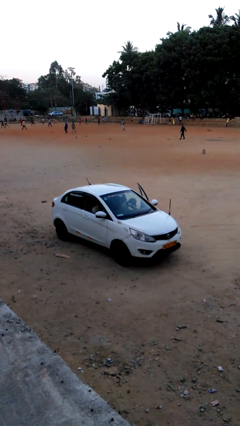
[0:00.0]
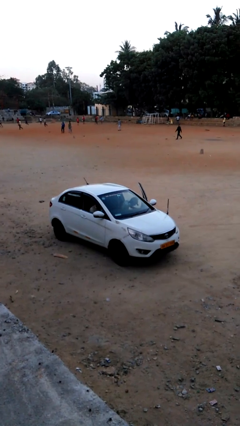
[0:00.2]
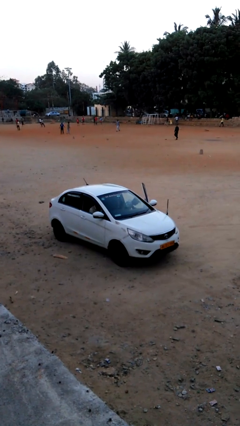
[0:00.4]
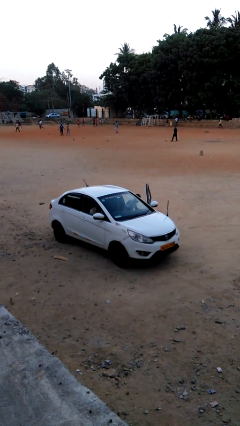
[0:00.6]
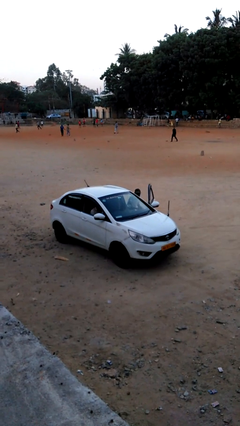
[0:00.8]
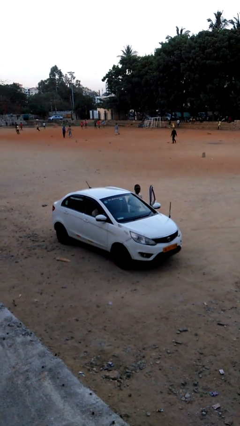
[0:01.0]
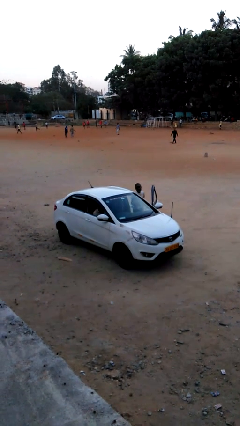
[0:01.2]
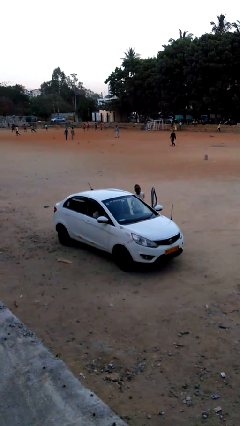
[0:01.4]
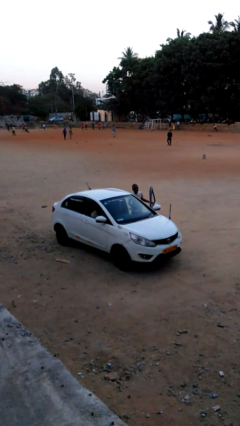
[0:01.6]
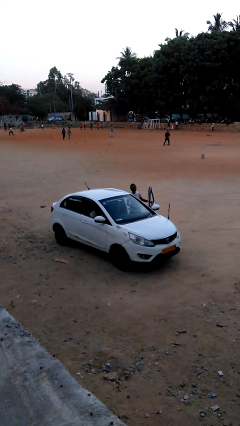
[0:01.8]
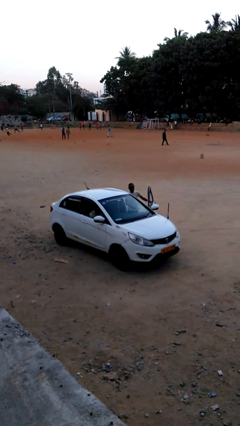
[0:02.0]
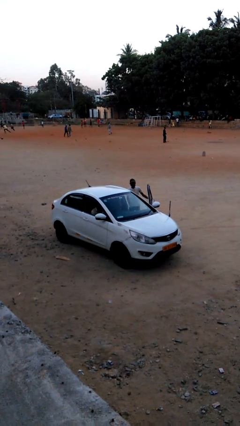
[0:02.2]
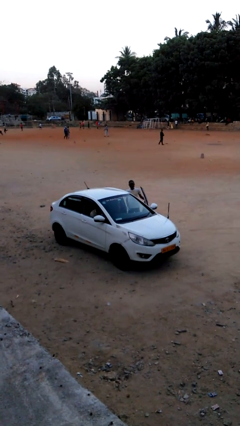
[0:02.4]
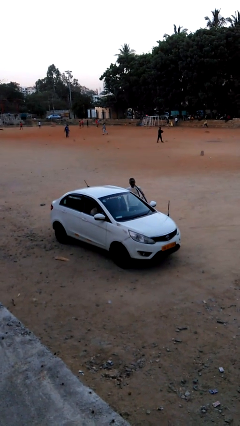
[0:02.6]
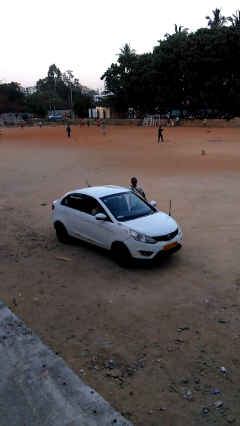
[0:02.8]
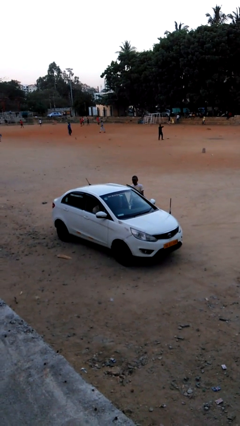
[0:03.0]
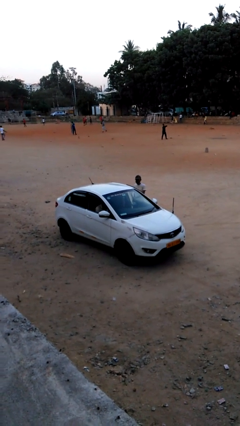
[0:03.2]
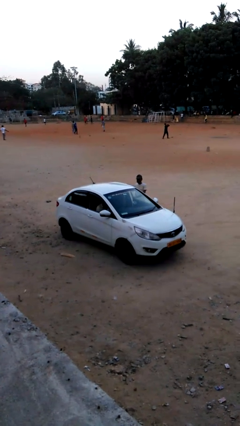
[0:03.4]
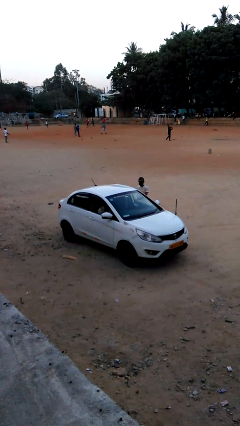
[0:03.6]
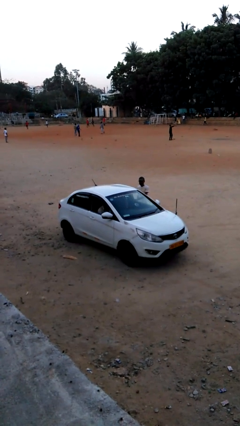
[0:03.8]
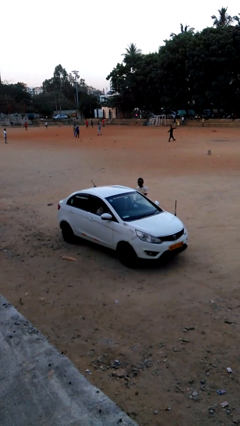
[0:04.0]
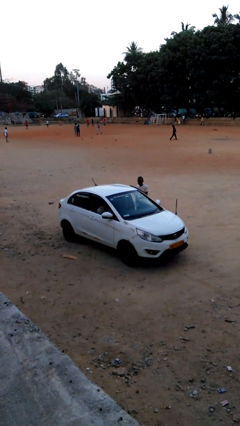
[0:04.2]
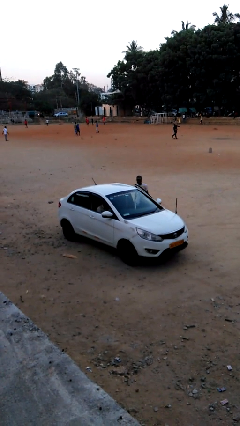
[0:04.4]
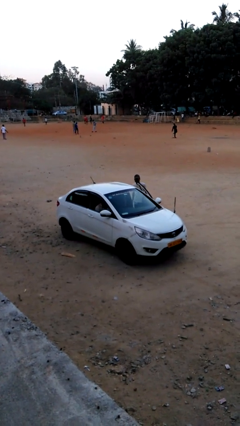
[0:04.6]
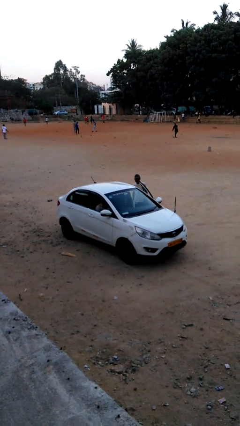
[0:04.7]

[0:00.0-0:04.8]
car drops off person

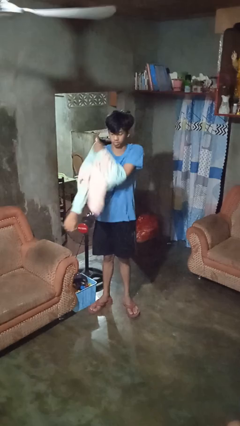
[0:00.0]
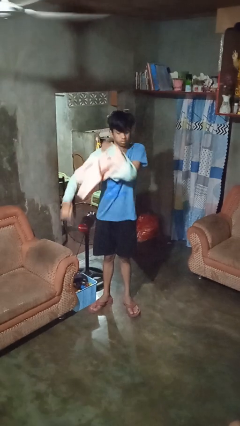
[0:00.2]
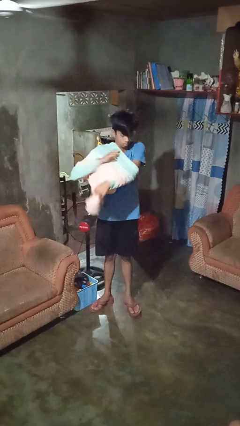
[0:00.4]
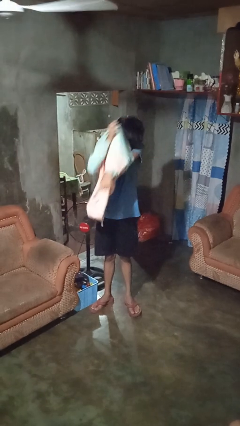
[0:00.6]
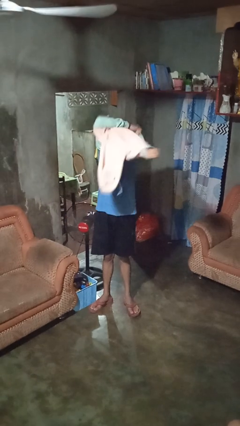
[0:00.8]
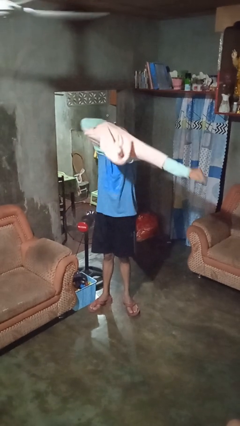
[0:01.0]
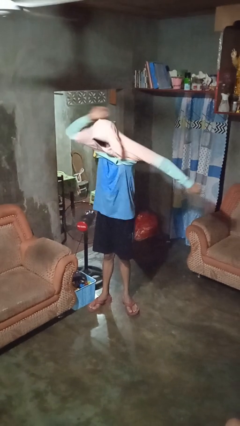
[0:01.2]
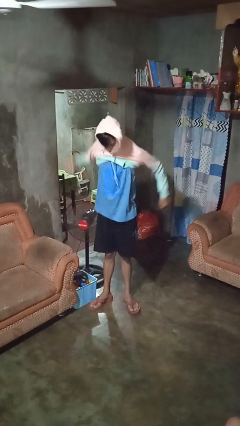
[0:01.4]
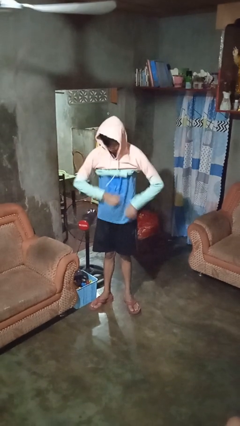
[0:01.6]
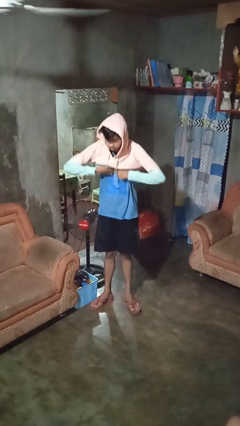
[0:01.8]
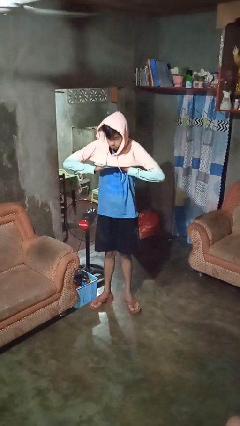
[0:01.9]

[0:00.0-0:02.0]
person puts on hoodie

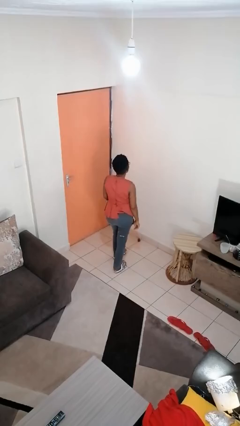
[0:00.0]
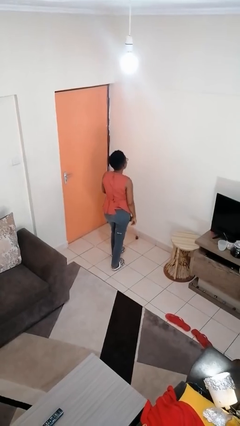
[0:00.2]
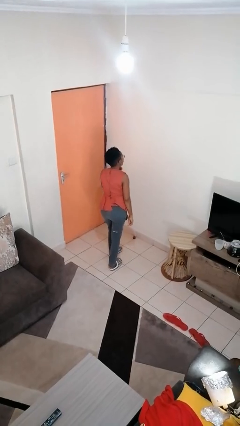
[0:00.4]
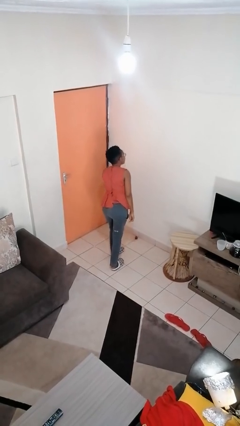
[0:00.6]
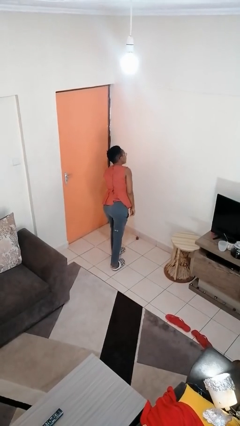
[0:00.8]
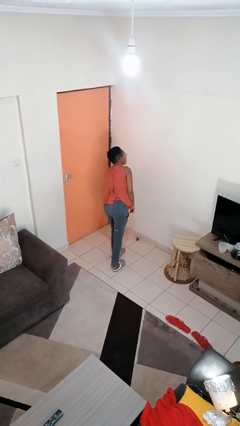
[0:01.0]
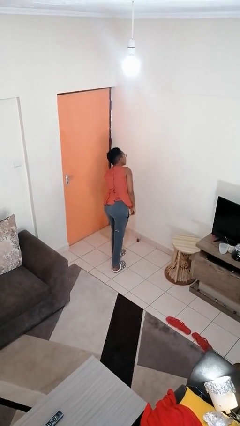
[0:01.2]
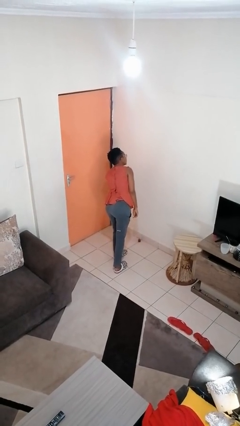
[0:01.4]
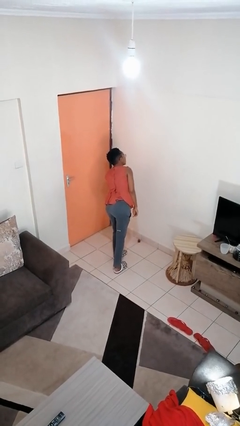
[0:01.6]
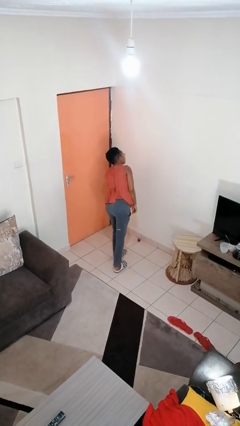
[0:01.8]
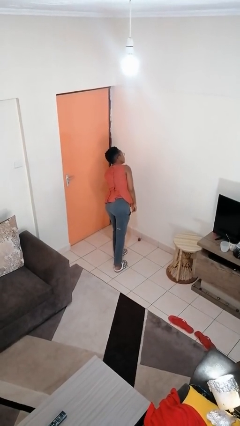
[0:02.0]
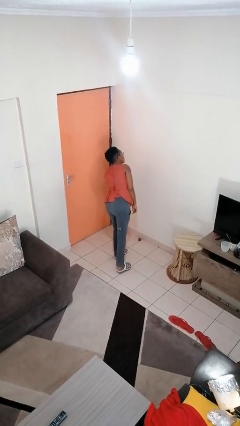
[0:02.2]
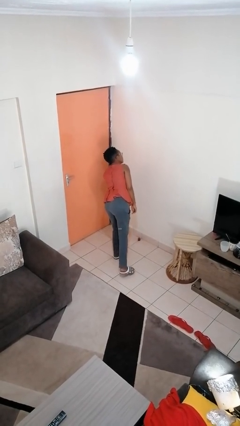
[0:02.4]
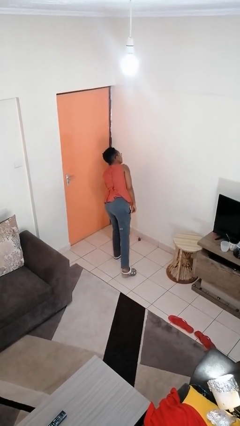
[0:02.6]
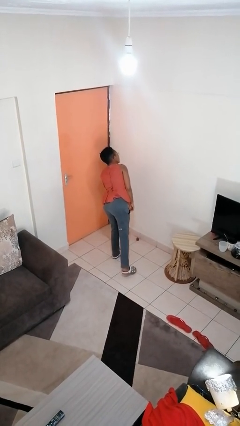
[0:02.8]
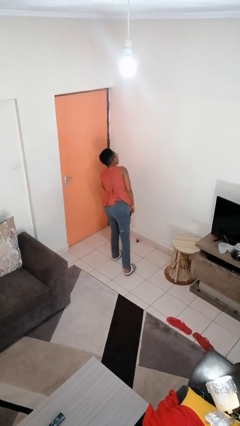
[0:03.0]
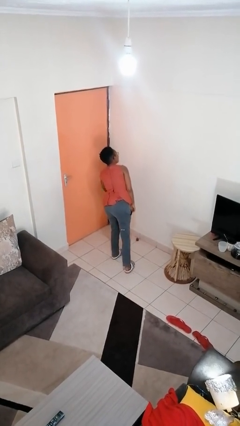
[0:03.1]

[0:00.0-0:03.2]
person gestures listen closely

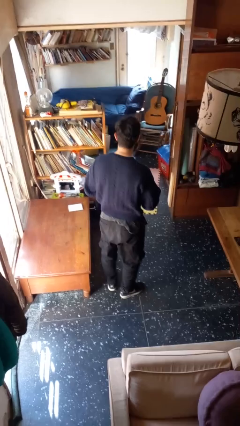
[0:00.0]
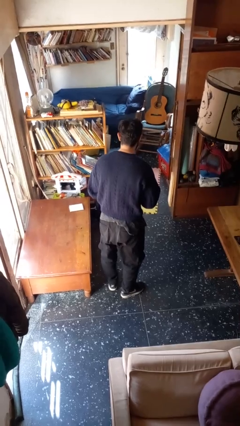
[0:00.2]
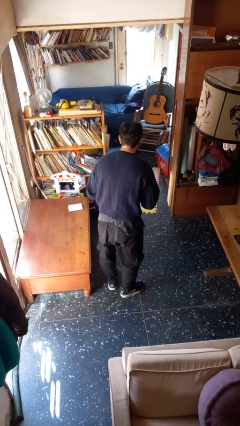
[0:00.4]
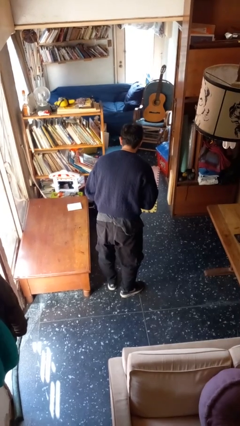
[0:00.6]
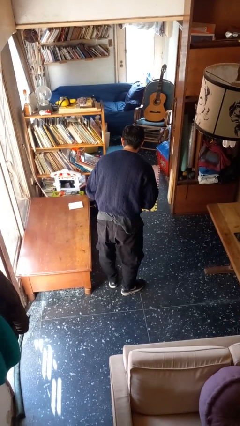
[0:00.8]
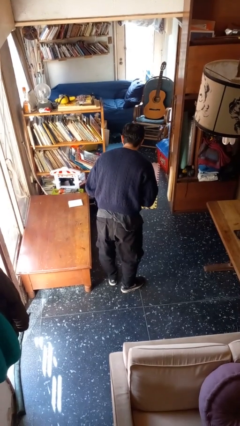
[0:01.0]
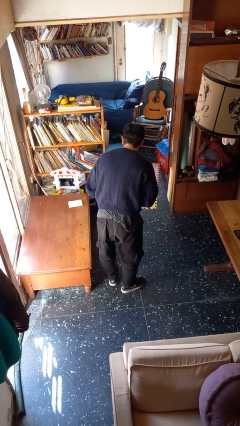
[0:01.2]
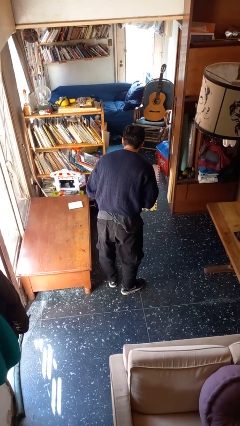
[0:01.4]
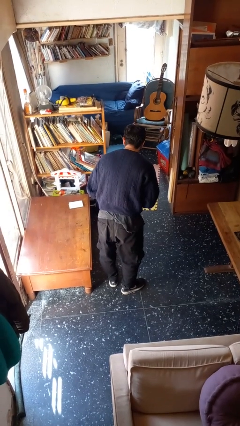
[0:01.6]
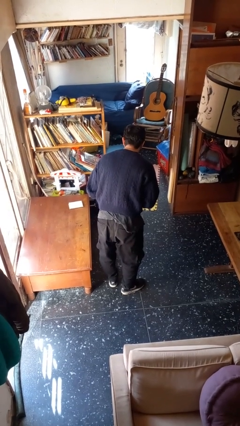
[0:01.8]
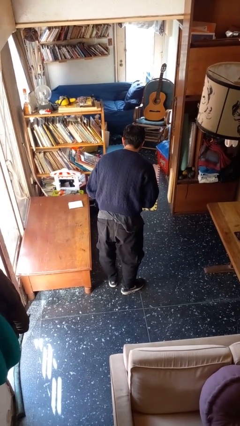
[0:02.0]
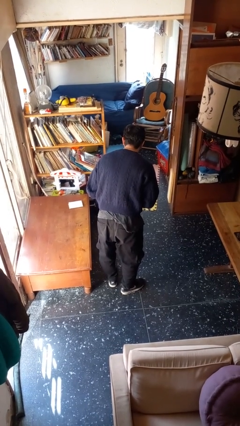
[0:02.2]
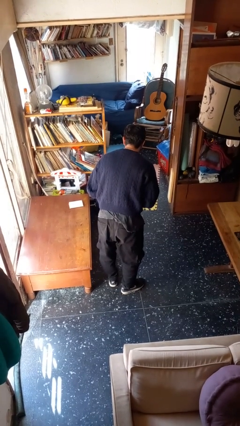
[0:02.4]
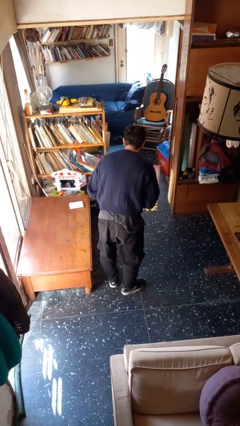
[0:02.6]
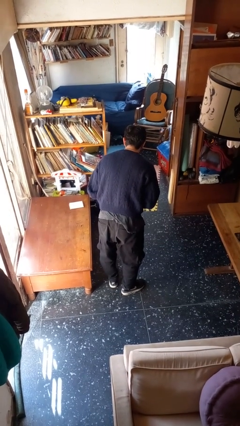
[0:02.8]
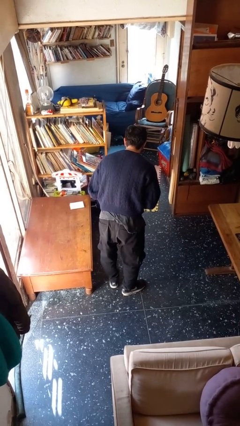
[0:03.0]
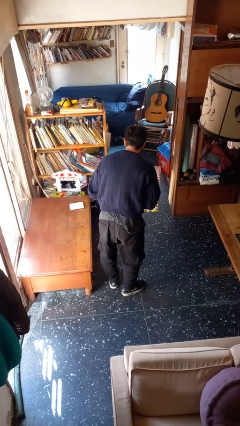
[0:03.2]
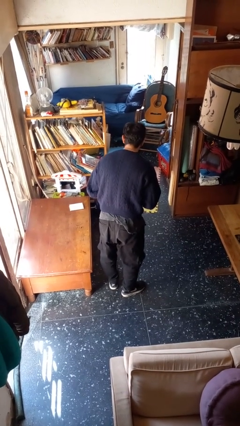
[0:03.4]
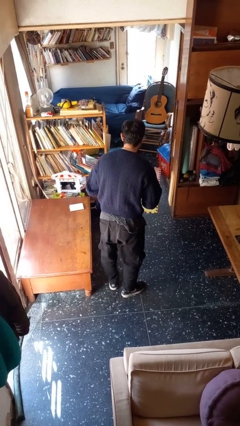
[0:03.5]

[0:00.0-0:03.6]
person bows

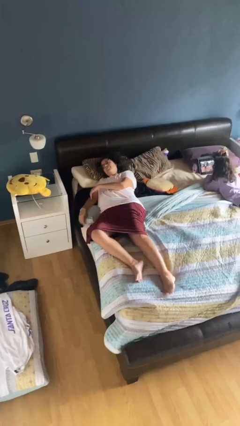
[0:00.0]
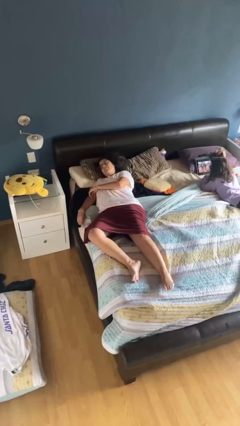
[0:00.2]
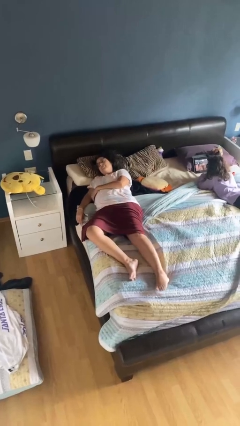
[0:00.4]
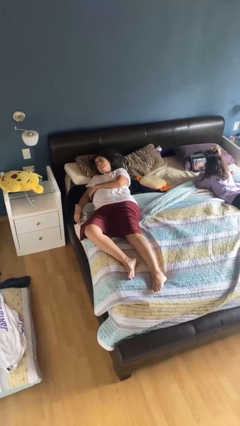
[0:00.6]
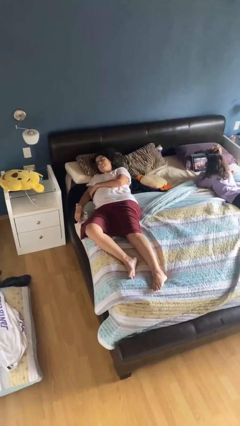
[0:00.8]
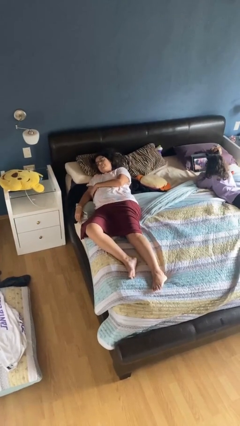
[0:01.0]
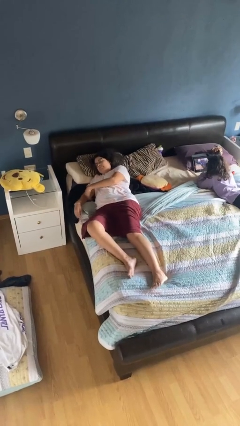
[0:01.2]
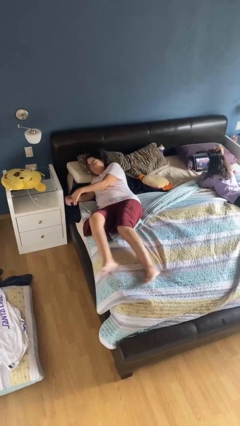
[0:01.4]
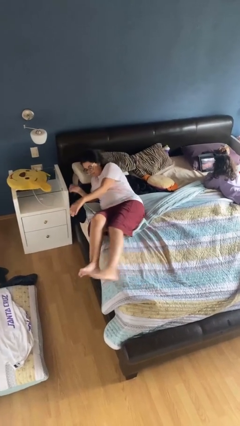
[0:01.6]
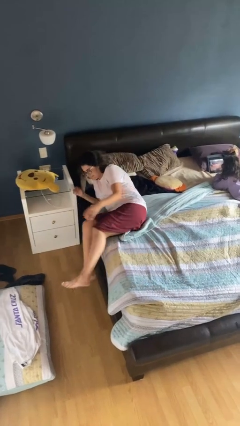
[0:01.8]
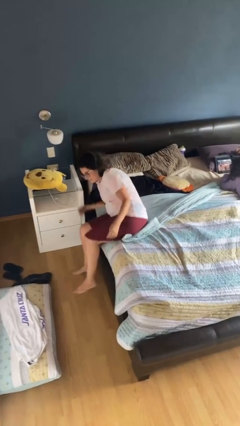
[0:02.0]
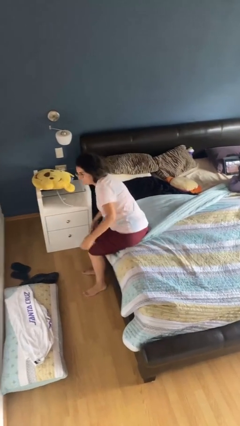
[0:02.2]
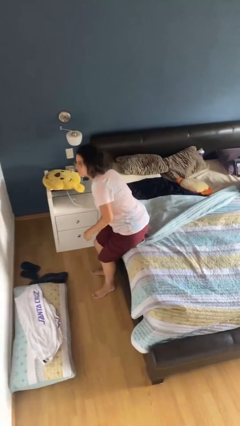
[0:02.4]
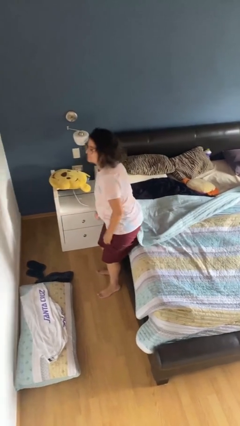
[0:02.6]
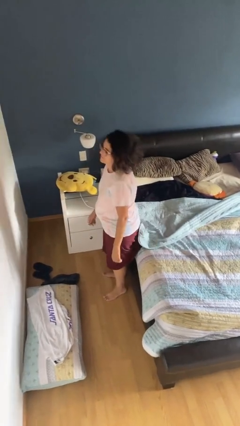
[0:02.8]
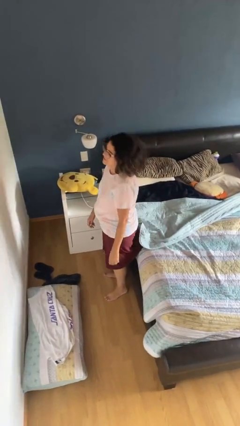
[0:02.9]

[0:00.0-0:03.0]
person stands up

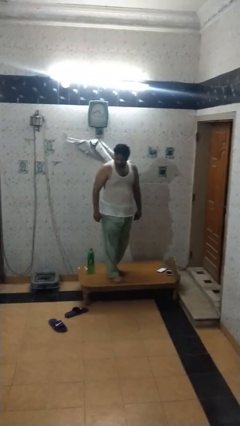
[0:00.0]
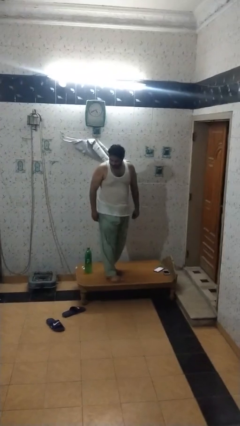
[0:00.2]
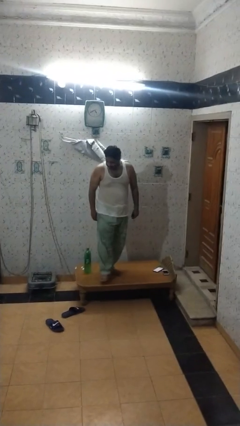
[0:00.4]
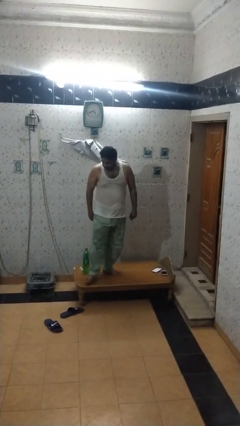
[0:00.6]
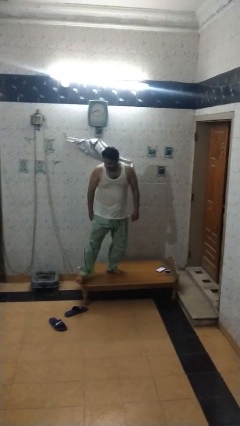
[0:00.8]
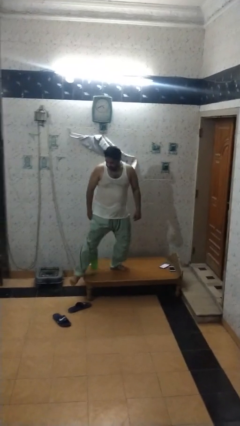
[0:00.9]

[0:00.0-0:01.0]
person climbs on table

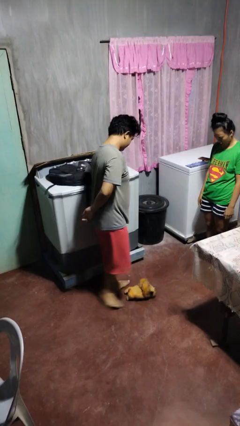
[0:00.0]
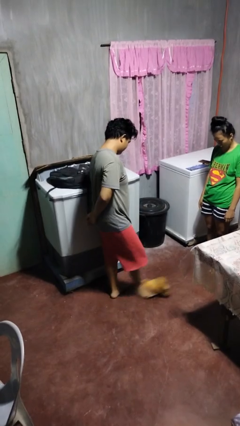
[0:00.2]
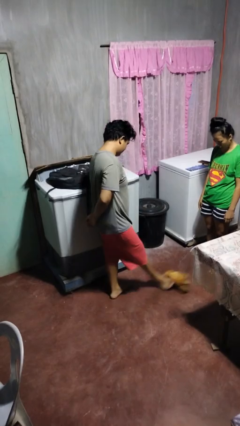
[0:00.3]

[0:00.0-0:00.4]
person kicks object to person
